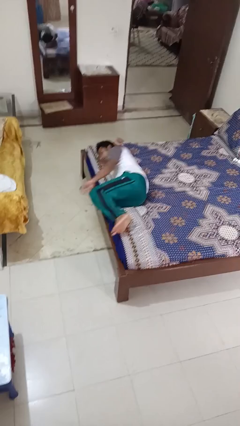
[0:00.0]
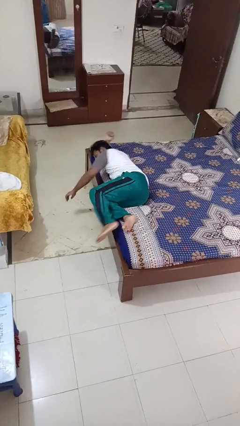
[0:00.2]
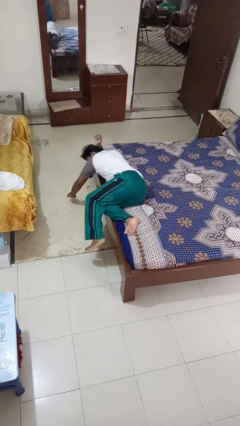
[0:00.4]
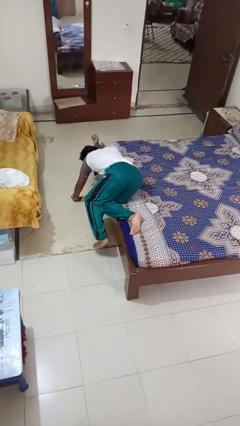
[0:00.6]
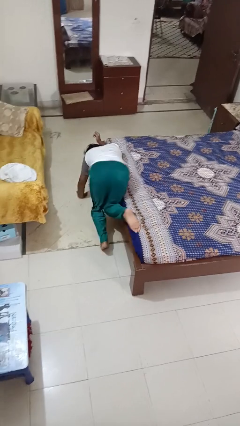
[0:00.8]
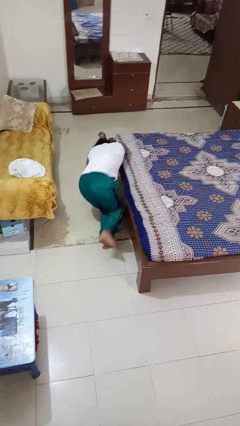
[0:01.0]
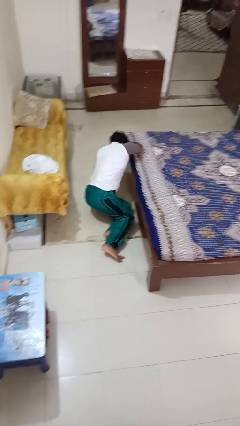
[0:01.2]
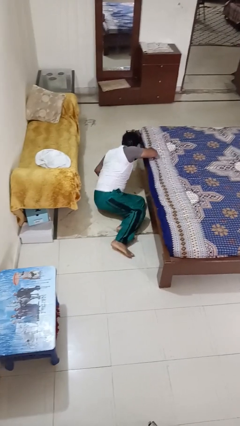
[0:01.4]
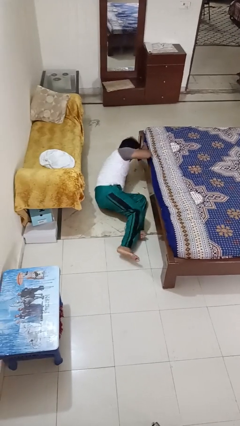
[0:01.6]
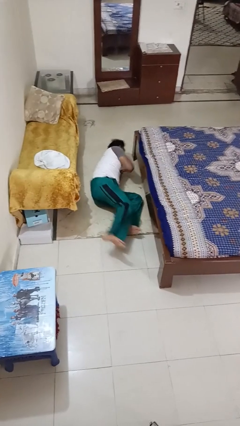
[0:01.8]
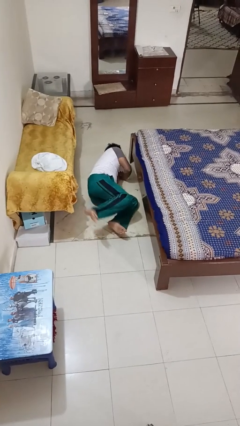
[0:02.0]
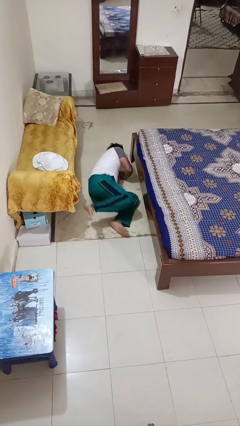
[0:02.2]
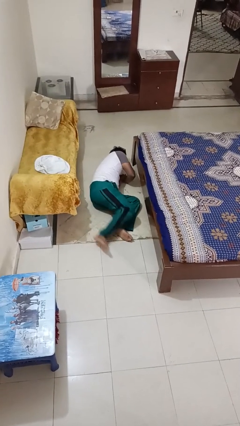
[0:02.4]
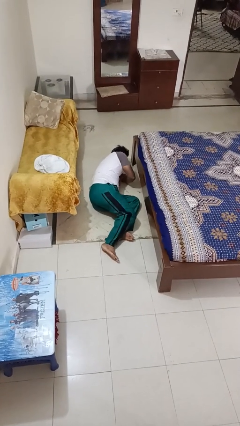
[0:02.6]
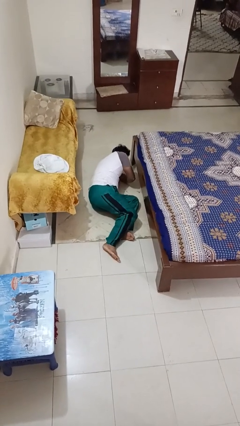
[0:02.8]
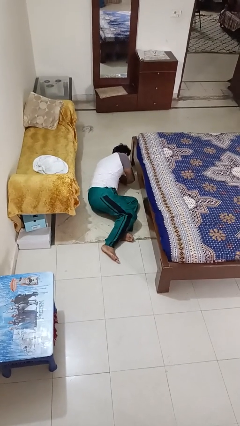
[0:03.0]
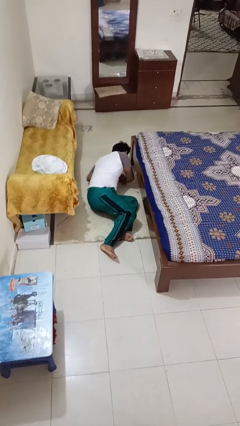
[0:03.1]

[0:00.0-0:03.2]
person falls from bed

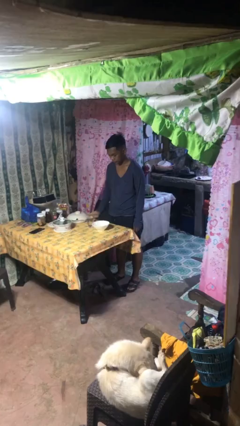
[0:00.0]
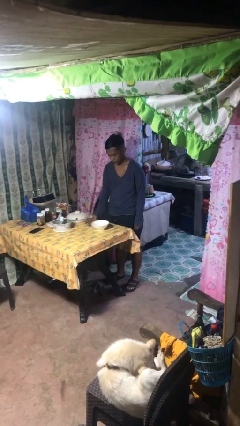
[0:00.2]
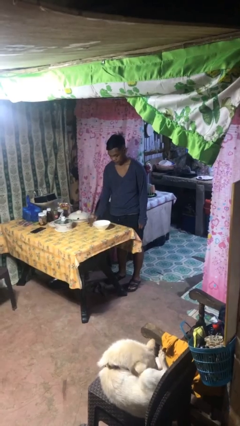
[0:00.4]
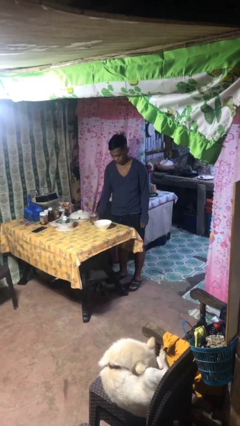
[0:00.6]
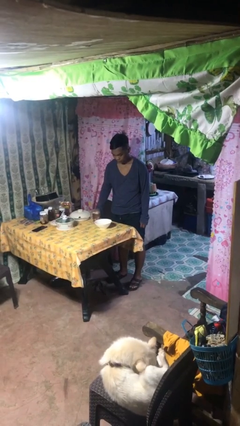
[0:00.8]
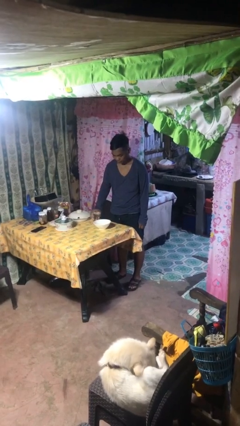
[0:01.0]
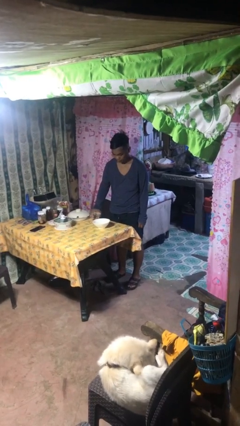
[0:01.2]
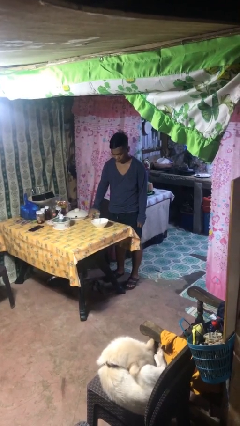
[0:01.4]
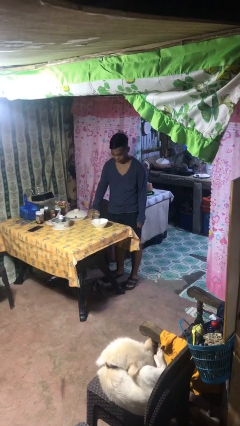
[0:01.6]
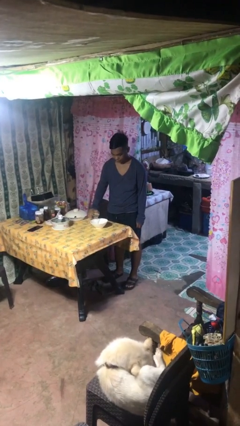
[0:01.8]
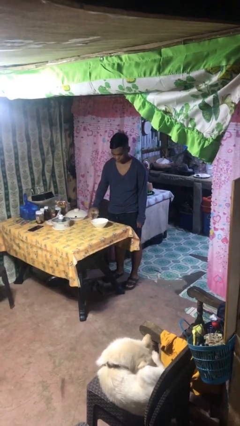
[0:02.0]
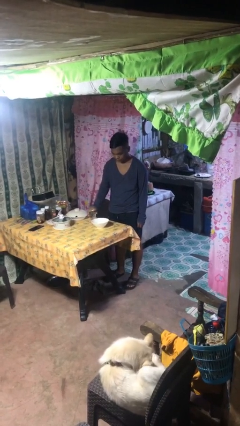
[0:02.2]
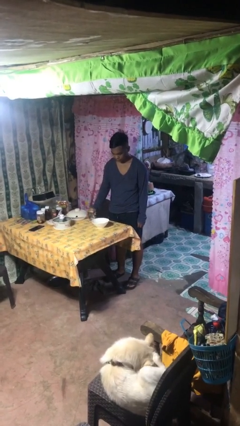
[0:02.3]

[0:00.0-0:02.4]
person pours into bowl

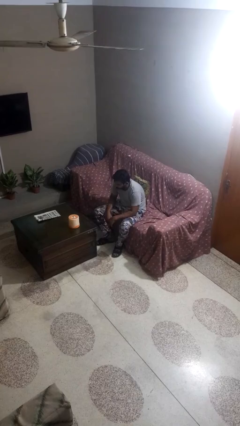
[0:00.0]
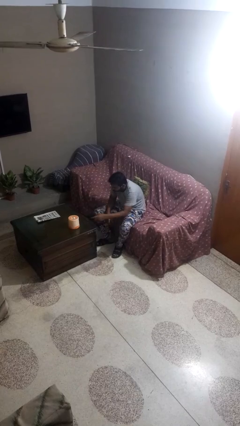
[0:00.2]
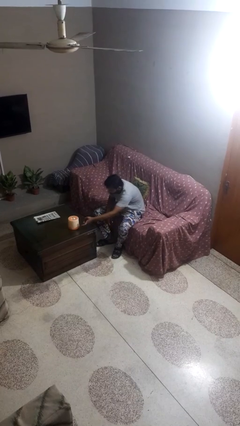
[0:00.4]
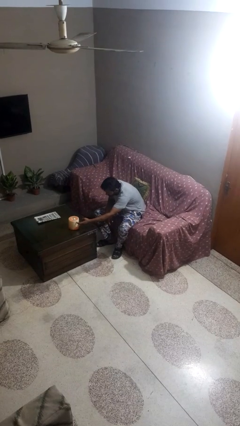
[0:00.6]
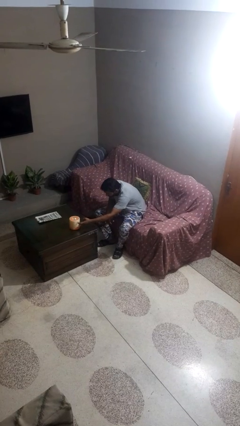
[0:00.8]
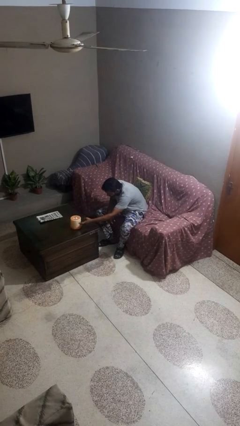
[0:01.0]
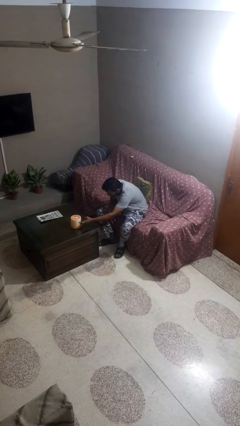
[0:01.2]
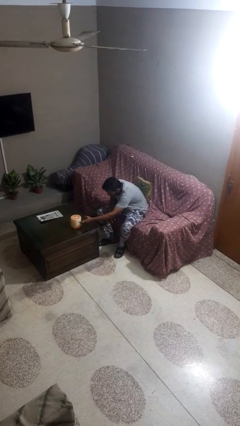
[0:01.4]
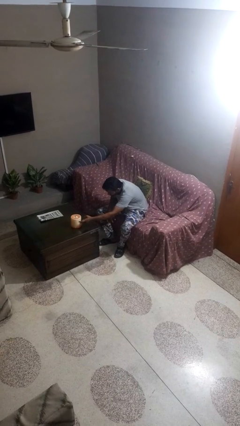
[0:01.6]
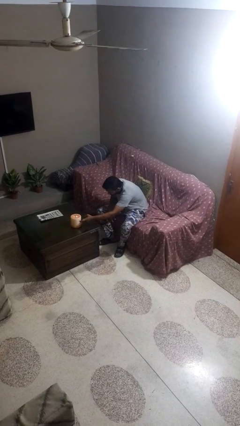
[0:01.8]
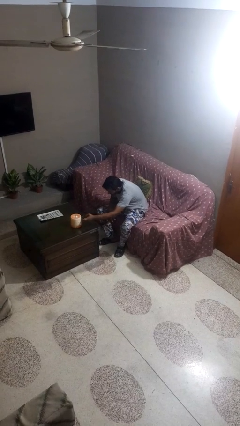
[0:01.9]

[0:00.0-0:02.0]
person taps object with finger

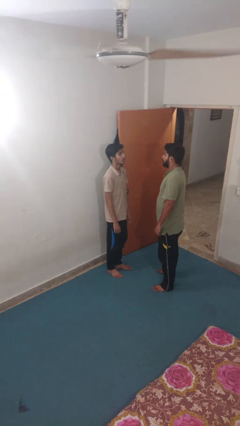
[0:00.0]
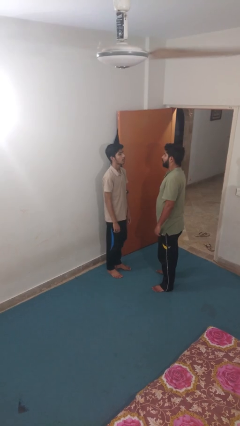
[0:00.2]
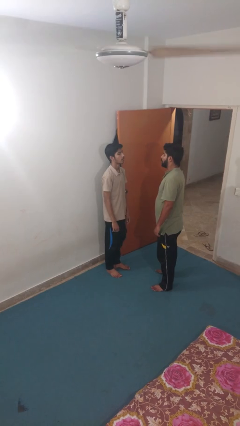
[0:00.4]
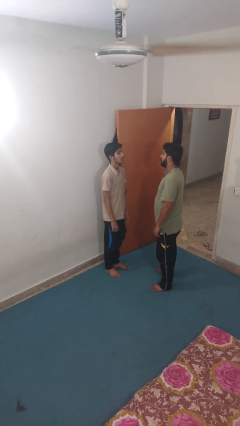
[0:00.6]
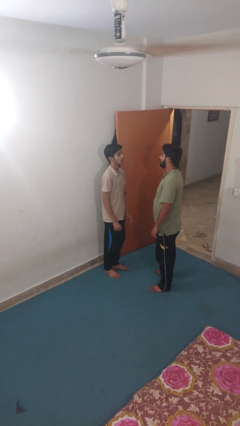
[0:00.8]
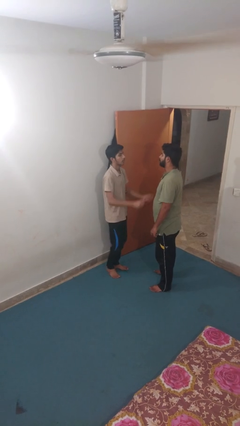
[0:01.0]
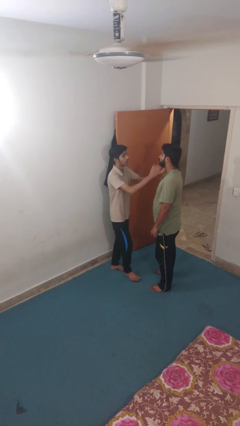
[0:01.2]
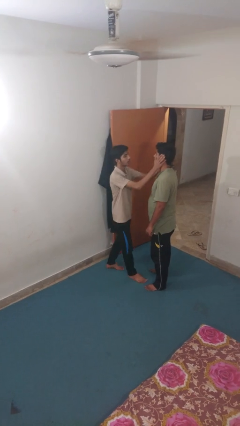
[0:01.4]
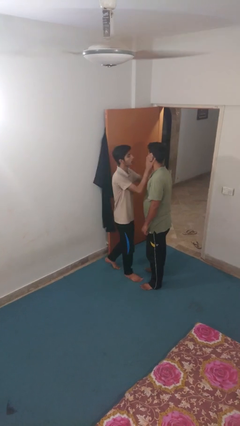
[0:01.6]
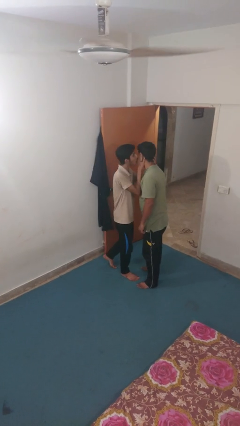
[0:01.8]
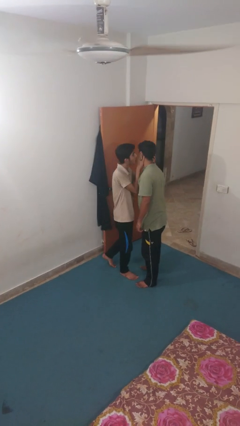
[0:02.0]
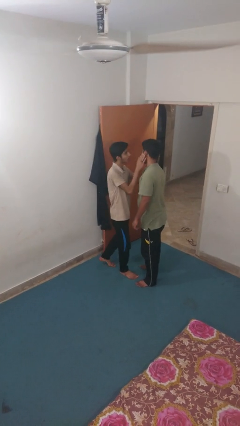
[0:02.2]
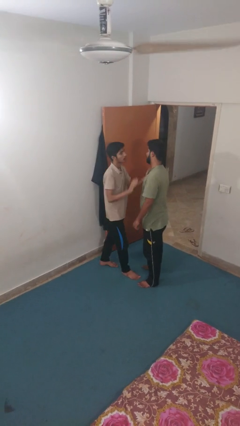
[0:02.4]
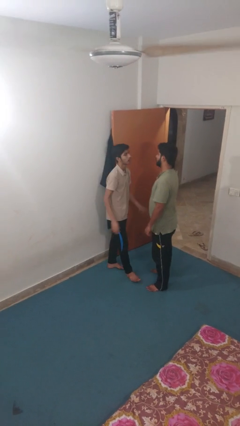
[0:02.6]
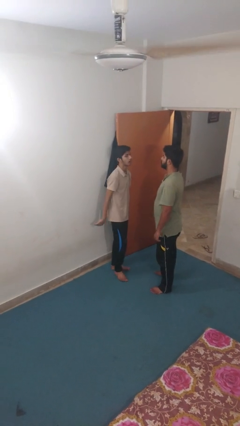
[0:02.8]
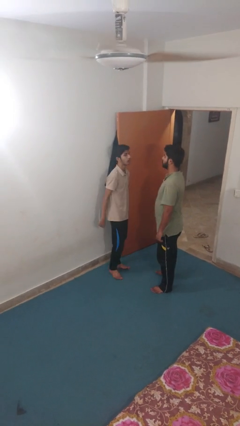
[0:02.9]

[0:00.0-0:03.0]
person kisses cheek of person

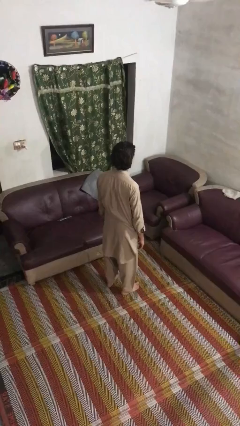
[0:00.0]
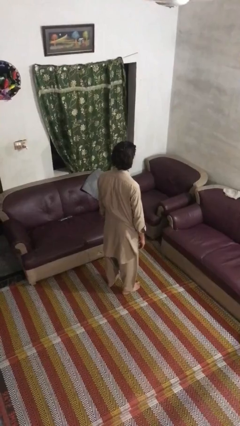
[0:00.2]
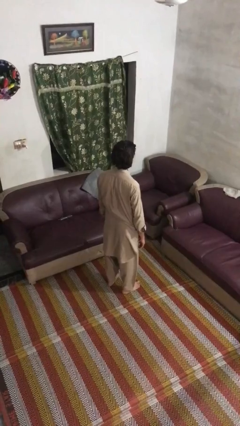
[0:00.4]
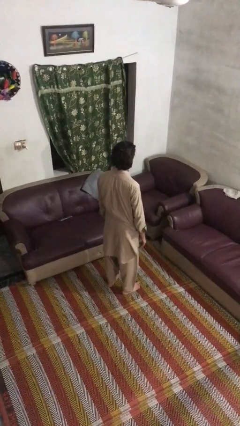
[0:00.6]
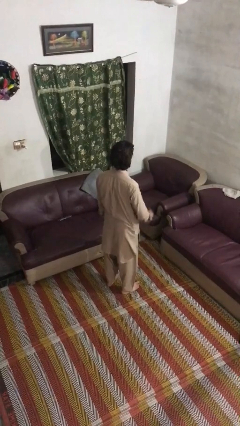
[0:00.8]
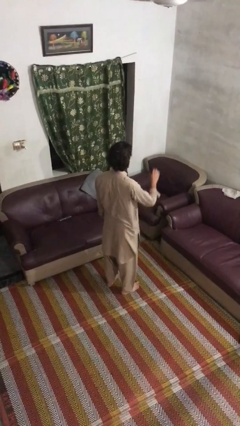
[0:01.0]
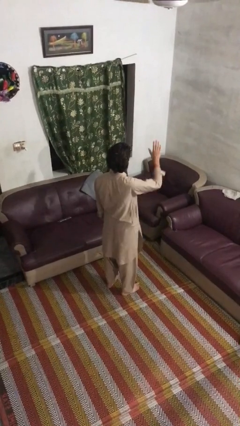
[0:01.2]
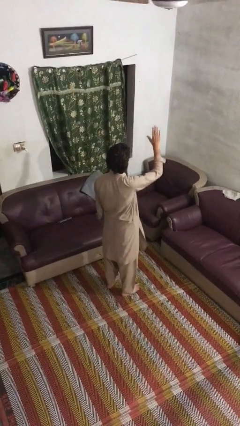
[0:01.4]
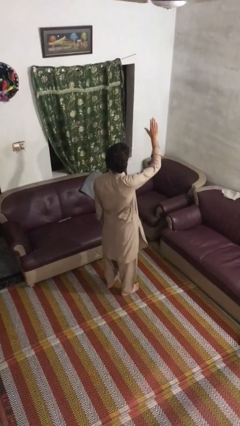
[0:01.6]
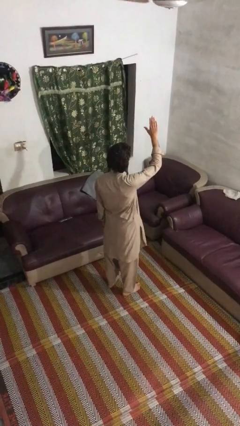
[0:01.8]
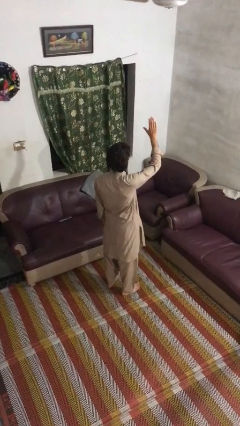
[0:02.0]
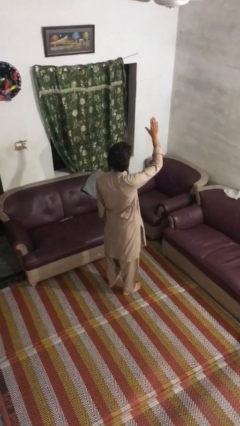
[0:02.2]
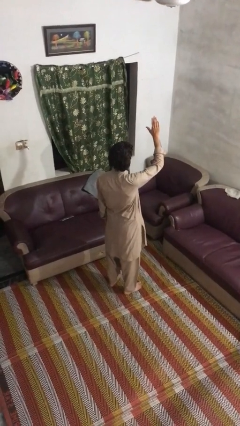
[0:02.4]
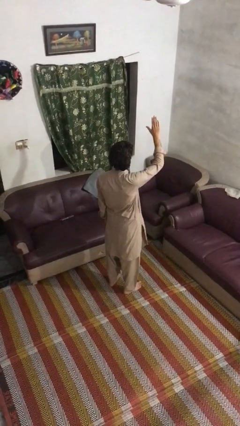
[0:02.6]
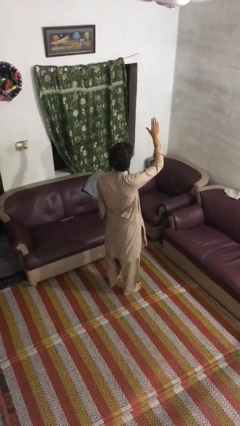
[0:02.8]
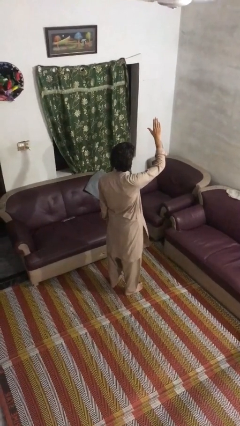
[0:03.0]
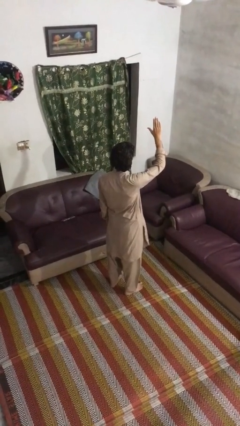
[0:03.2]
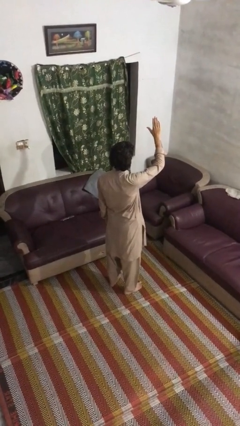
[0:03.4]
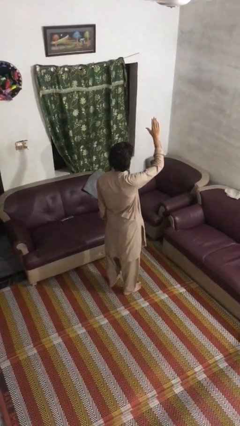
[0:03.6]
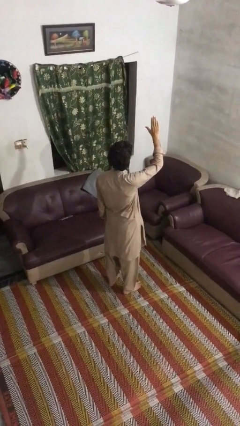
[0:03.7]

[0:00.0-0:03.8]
person gestures raise hand

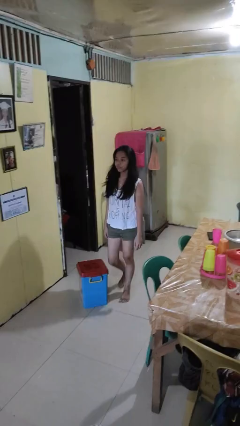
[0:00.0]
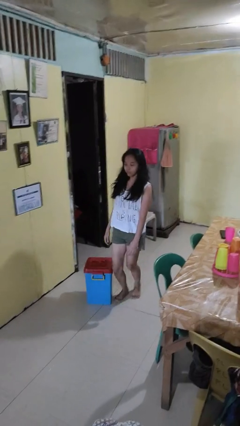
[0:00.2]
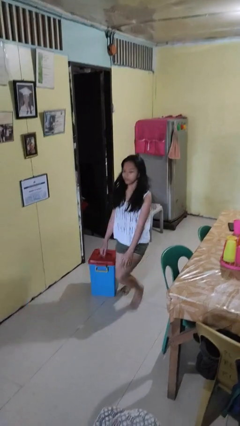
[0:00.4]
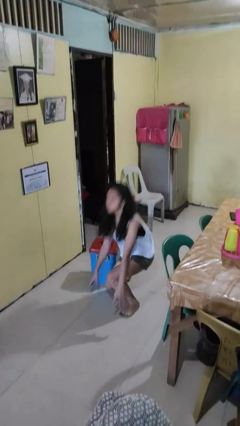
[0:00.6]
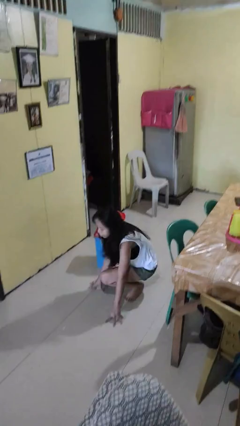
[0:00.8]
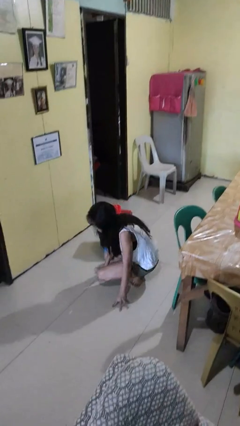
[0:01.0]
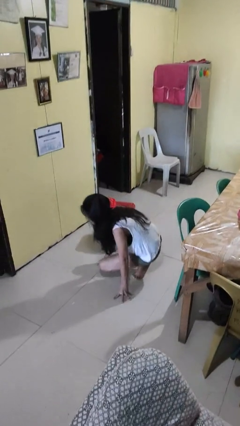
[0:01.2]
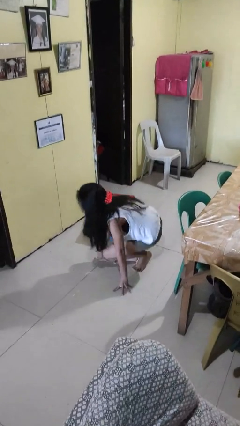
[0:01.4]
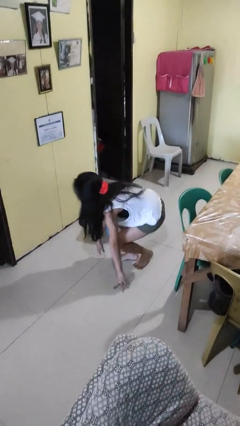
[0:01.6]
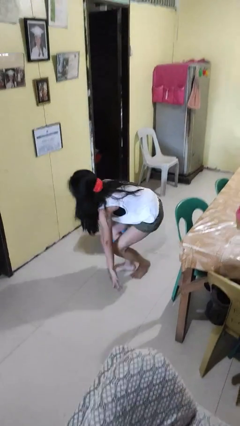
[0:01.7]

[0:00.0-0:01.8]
person trips on object on floor

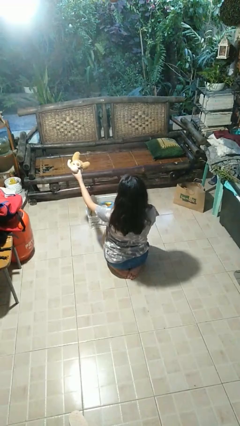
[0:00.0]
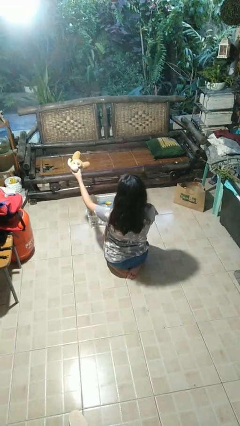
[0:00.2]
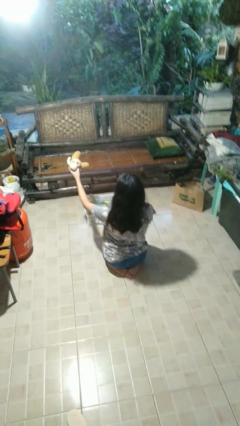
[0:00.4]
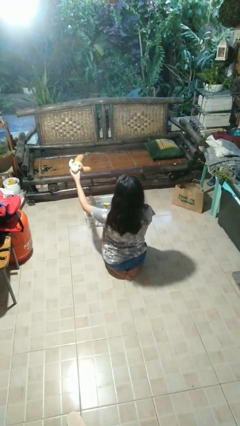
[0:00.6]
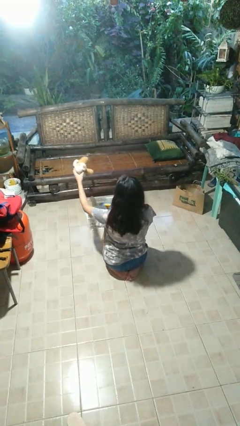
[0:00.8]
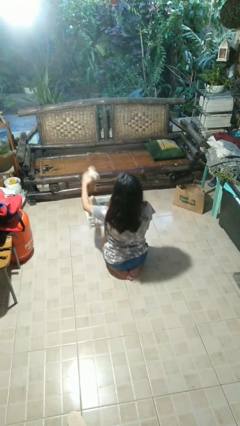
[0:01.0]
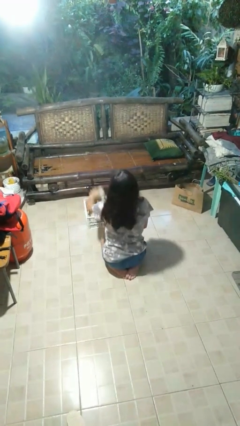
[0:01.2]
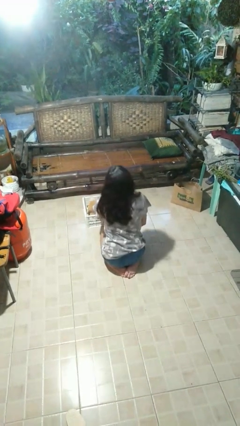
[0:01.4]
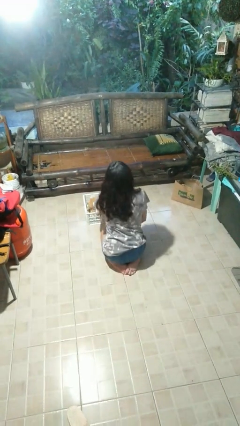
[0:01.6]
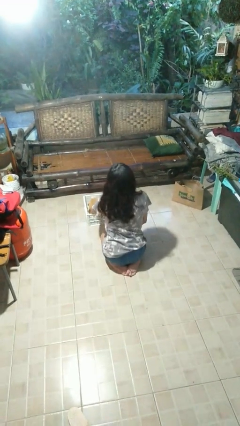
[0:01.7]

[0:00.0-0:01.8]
person puts object into basket
